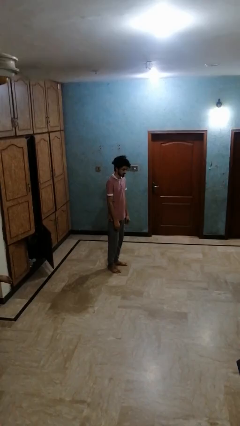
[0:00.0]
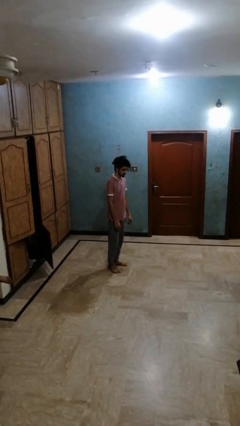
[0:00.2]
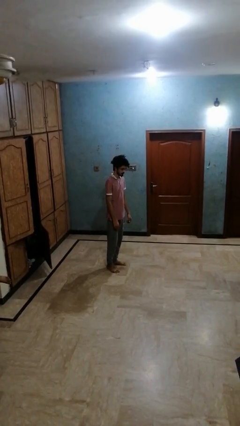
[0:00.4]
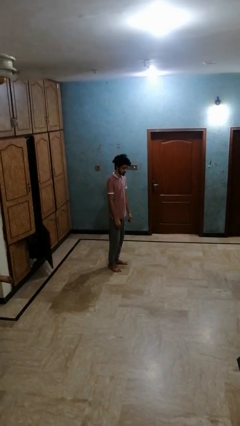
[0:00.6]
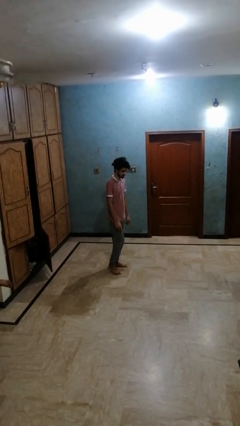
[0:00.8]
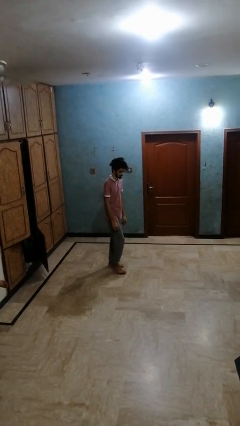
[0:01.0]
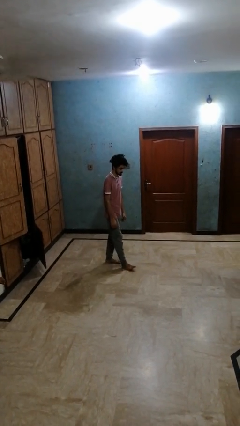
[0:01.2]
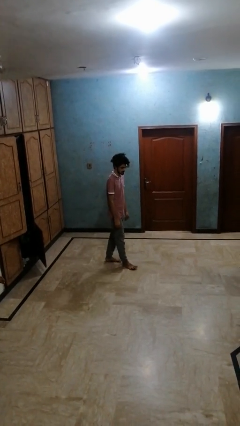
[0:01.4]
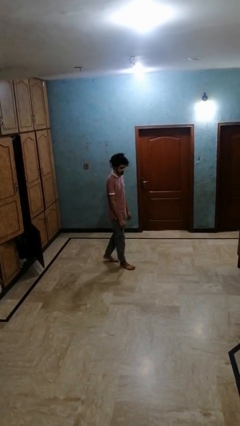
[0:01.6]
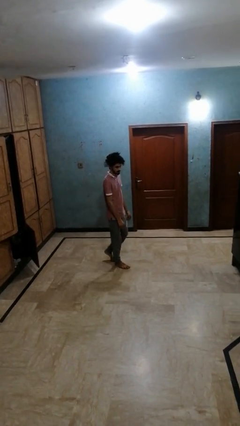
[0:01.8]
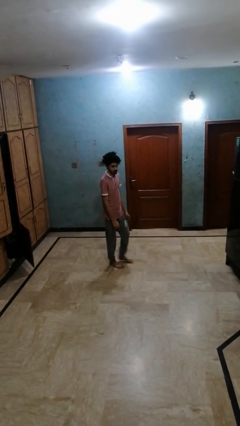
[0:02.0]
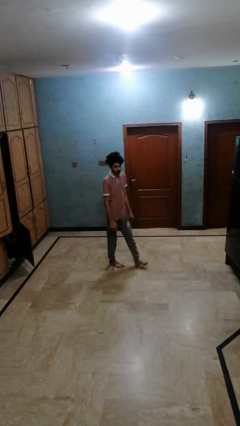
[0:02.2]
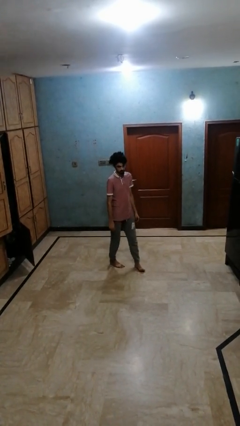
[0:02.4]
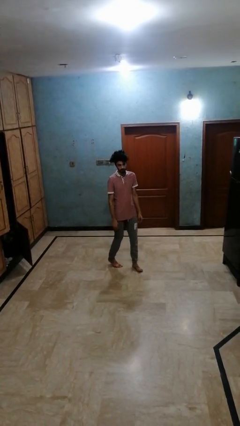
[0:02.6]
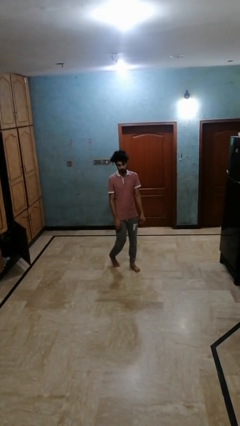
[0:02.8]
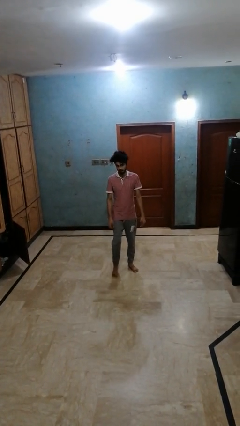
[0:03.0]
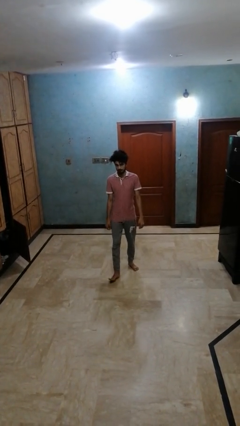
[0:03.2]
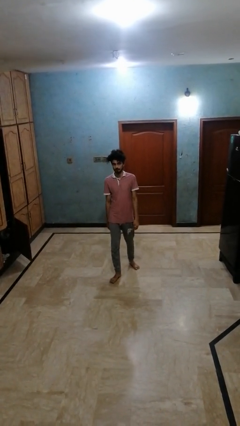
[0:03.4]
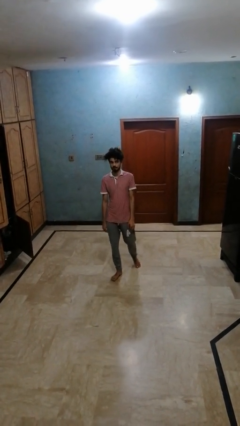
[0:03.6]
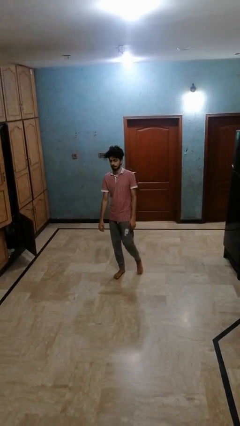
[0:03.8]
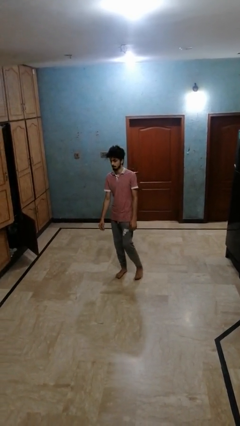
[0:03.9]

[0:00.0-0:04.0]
person twirls

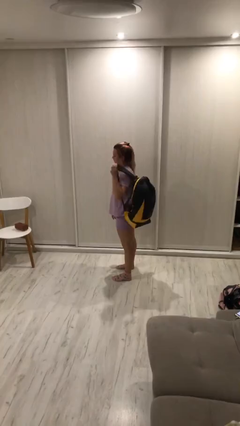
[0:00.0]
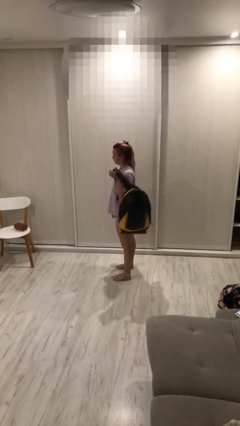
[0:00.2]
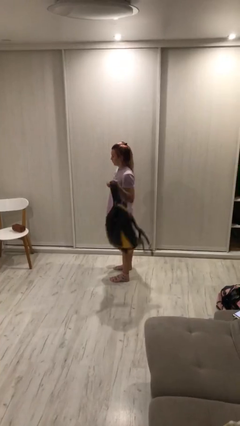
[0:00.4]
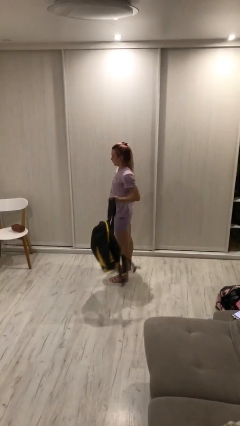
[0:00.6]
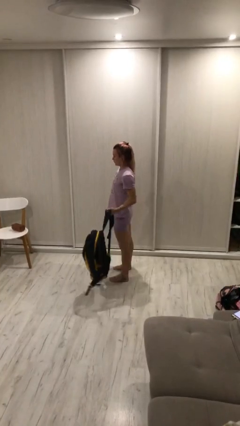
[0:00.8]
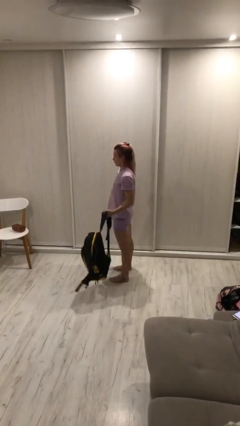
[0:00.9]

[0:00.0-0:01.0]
person takes off backpack

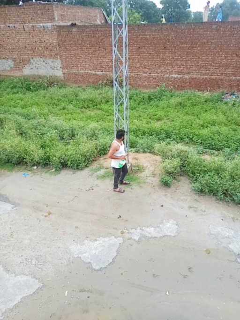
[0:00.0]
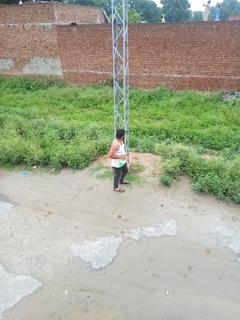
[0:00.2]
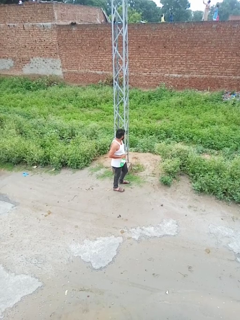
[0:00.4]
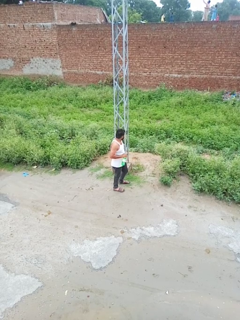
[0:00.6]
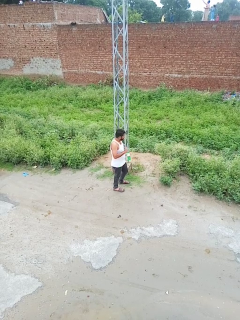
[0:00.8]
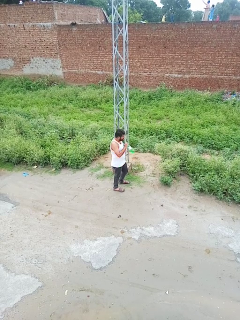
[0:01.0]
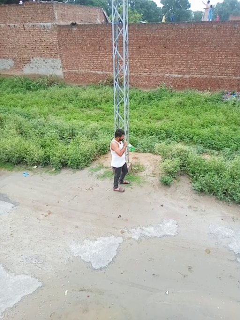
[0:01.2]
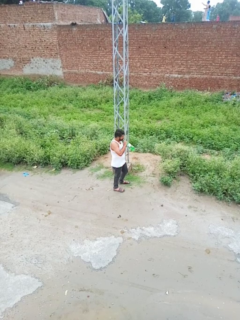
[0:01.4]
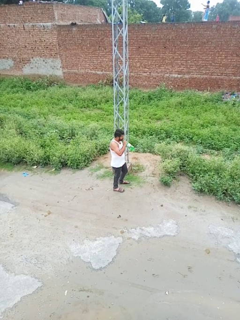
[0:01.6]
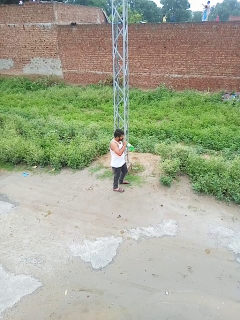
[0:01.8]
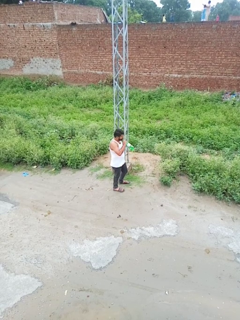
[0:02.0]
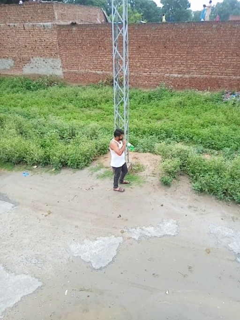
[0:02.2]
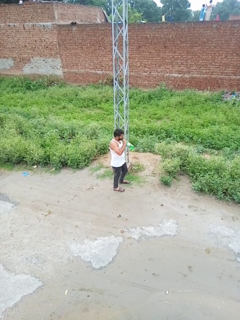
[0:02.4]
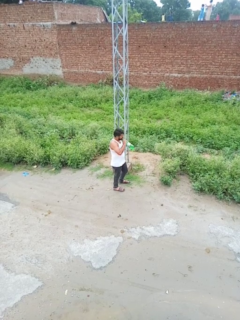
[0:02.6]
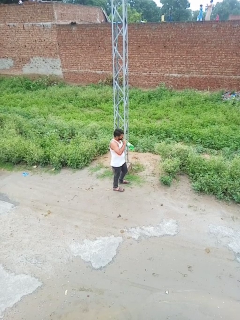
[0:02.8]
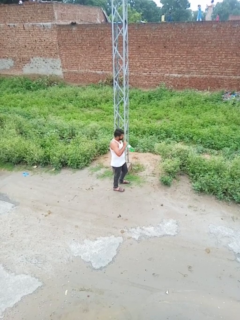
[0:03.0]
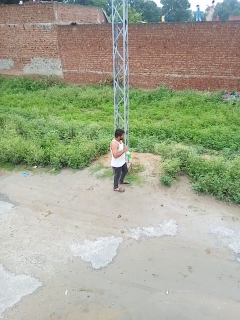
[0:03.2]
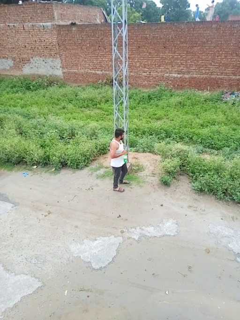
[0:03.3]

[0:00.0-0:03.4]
person drinks from straw

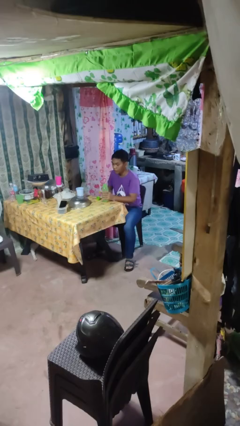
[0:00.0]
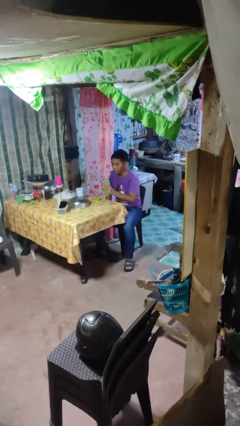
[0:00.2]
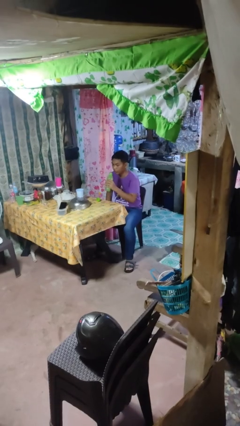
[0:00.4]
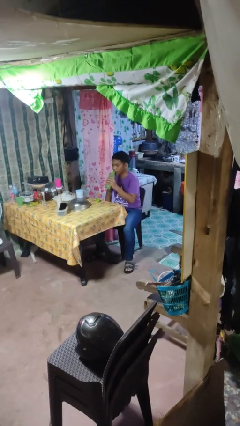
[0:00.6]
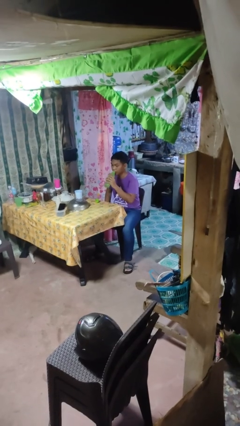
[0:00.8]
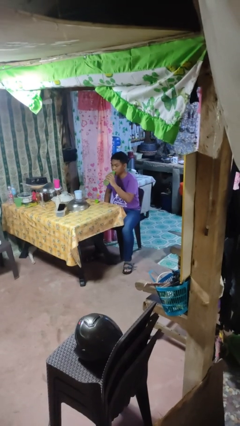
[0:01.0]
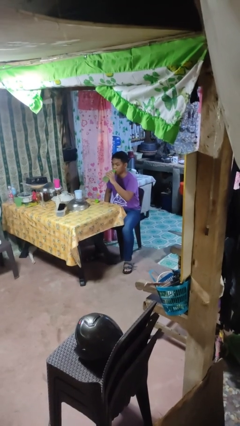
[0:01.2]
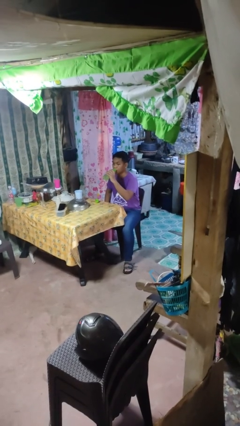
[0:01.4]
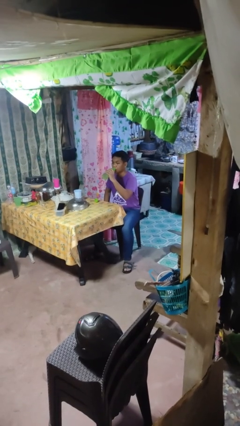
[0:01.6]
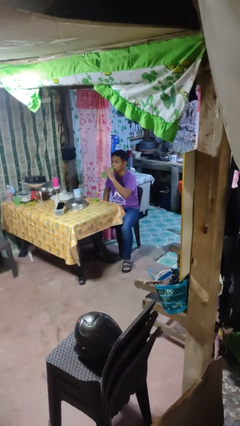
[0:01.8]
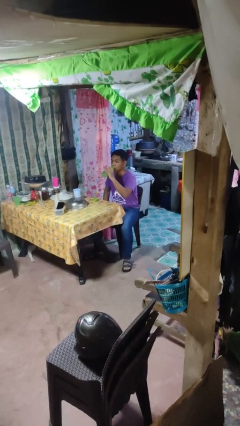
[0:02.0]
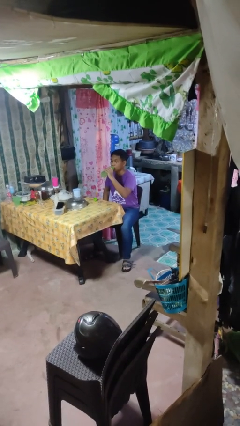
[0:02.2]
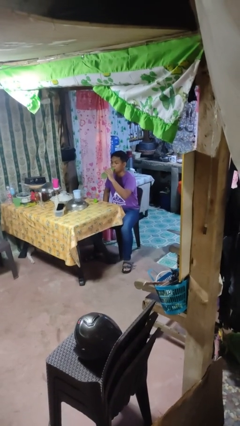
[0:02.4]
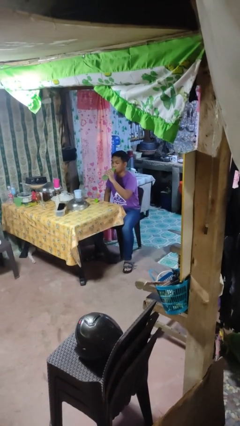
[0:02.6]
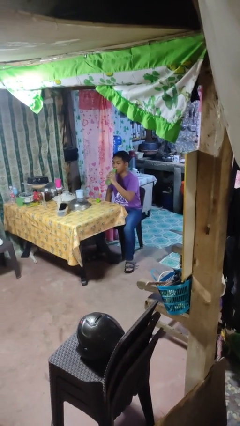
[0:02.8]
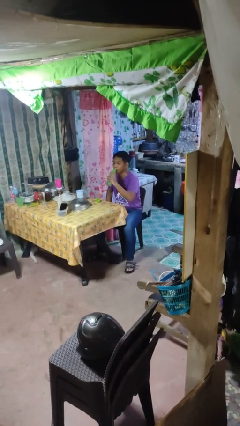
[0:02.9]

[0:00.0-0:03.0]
person drinks from bottle

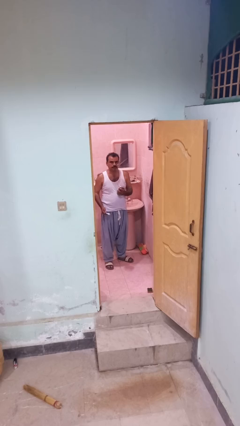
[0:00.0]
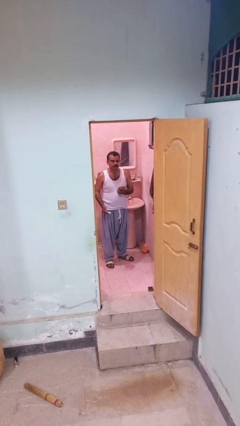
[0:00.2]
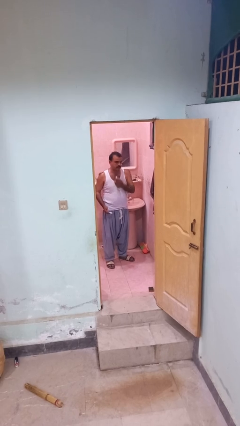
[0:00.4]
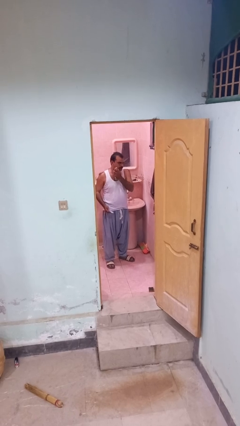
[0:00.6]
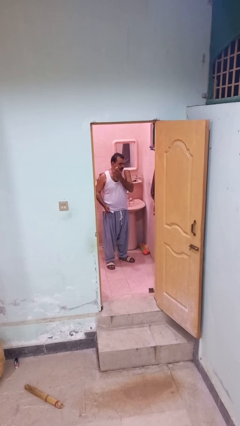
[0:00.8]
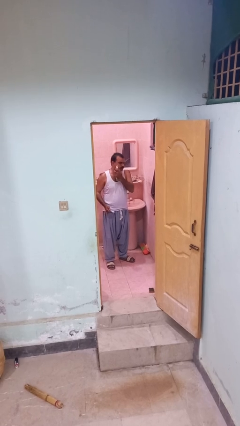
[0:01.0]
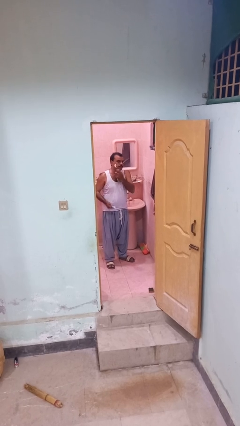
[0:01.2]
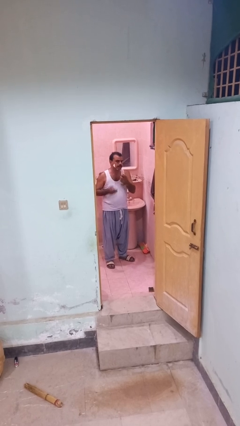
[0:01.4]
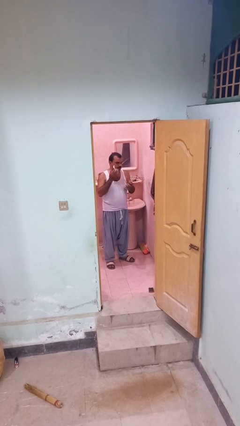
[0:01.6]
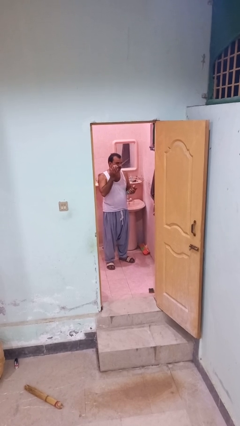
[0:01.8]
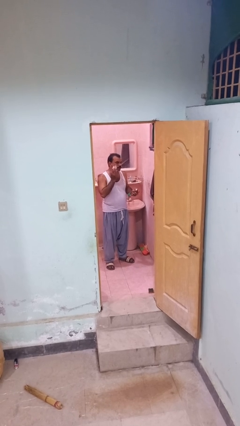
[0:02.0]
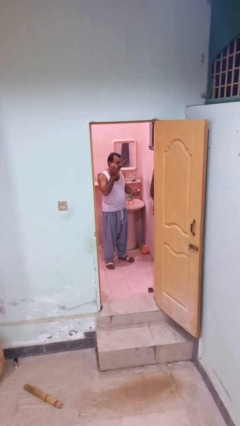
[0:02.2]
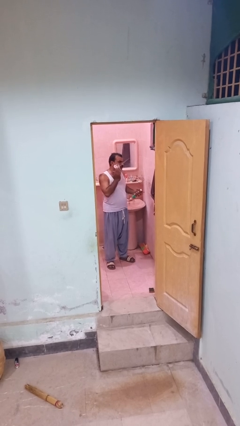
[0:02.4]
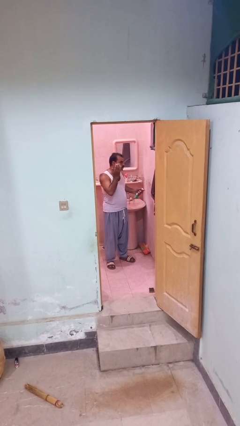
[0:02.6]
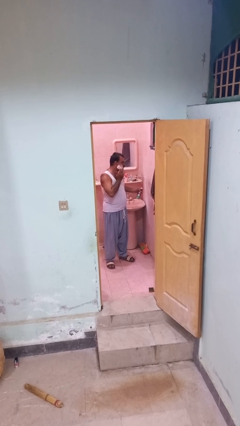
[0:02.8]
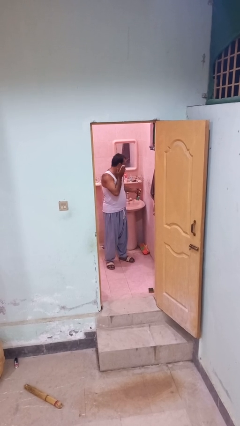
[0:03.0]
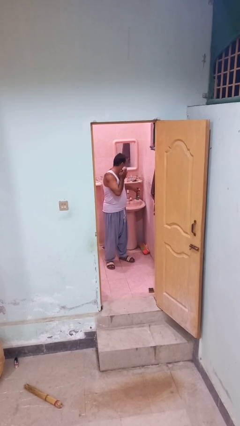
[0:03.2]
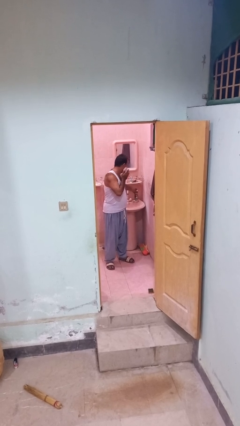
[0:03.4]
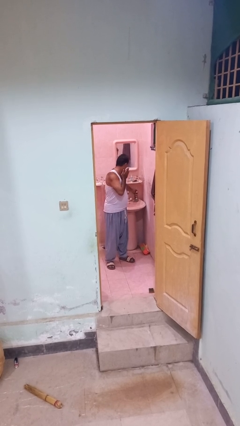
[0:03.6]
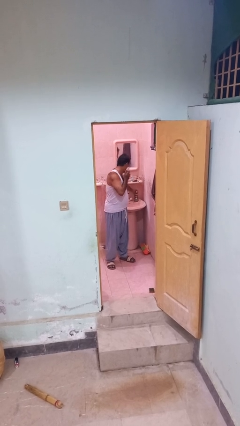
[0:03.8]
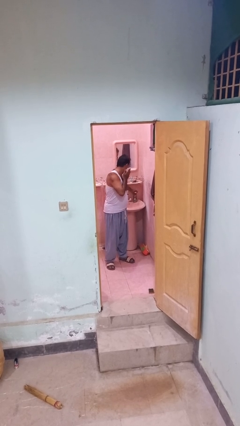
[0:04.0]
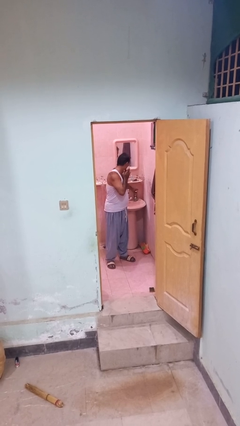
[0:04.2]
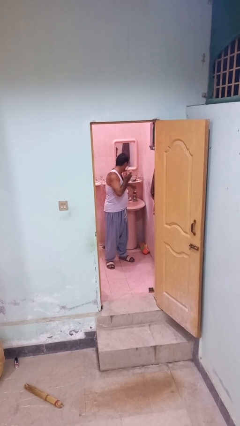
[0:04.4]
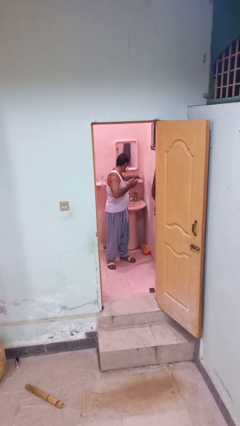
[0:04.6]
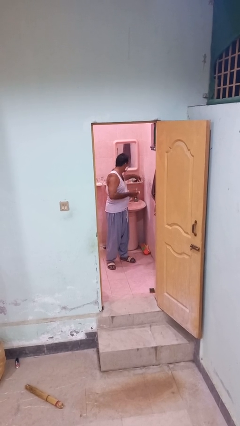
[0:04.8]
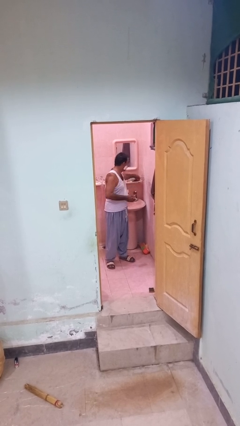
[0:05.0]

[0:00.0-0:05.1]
person applies shaving cream

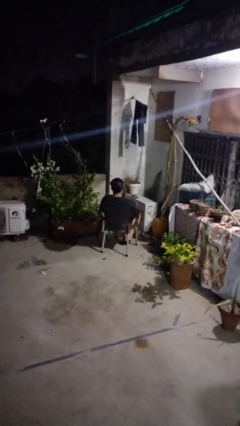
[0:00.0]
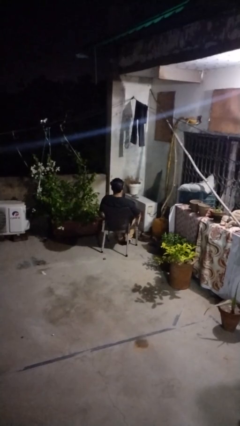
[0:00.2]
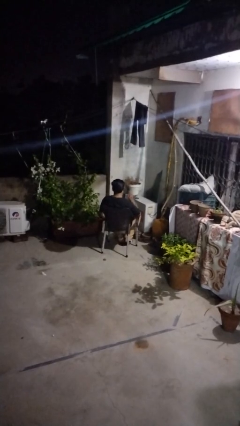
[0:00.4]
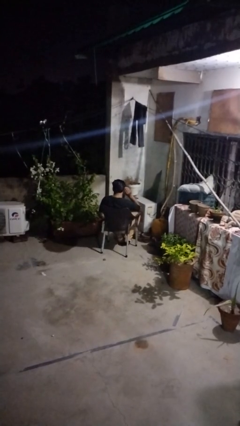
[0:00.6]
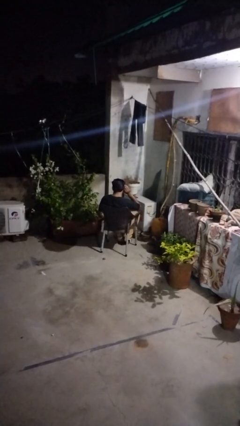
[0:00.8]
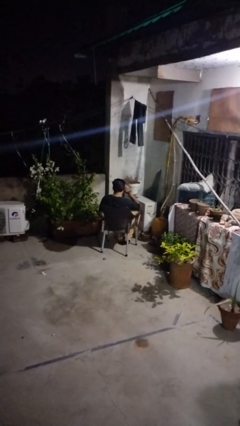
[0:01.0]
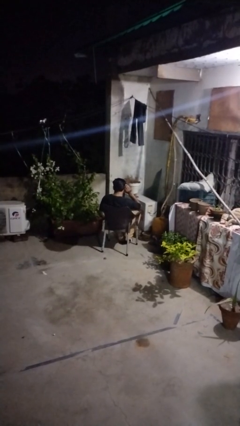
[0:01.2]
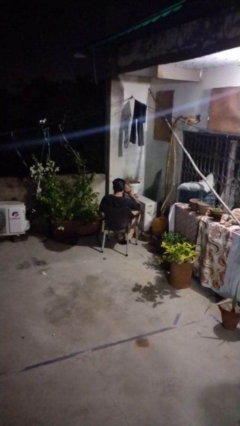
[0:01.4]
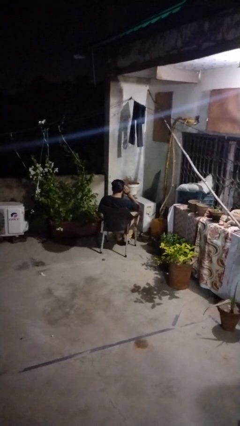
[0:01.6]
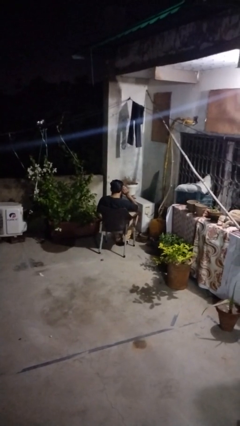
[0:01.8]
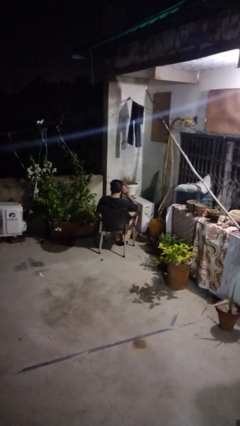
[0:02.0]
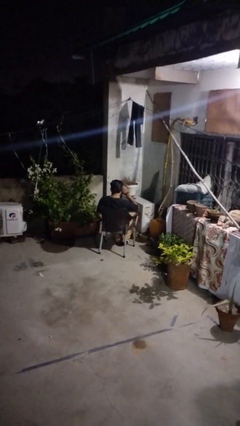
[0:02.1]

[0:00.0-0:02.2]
person gestures listen closely
